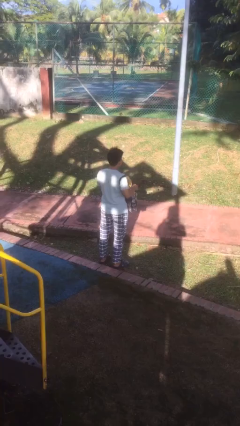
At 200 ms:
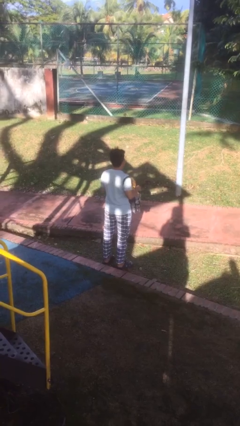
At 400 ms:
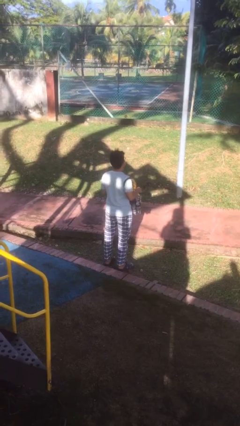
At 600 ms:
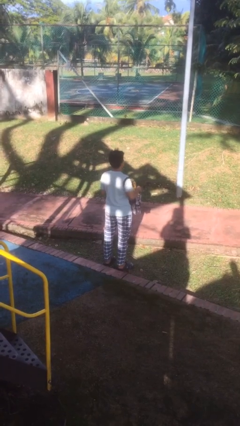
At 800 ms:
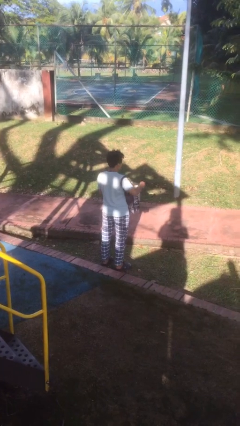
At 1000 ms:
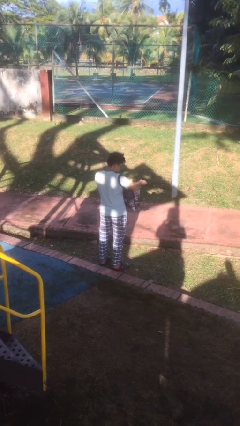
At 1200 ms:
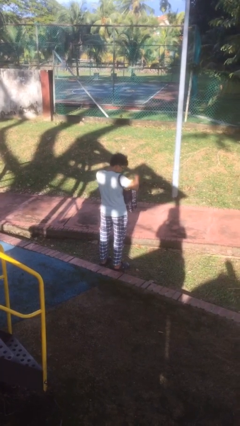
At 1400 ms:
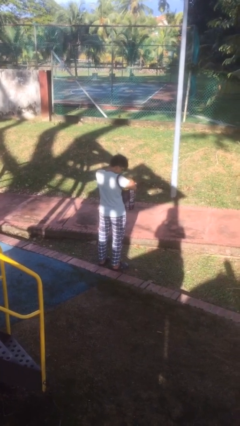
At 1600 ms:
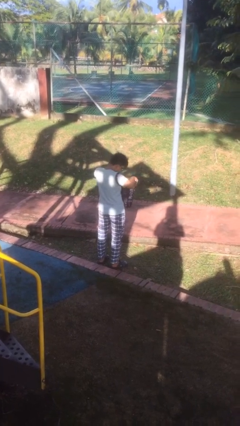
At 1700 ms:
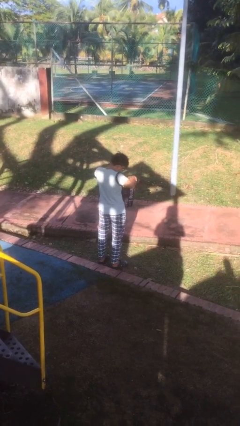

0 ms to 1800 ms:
person searches in bag

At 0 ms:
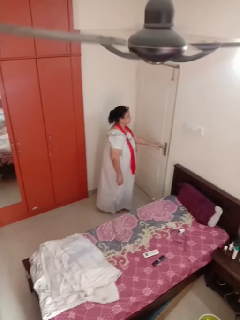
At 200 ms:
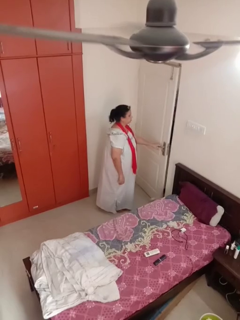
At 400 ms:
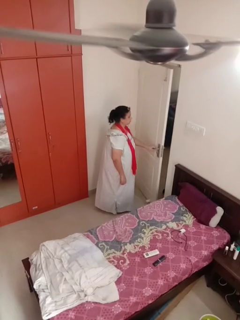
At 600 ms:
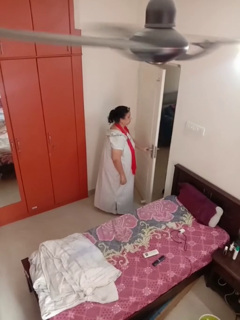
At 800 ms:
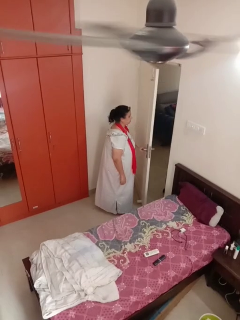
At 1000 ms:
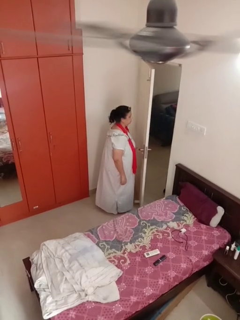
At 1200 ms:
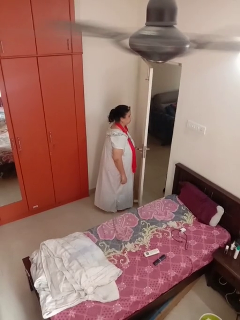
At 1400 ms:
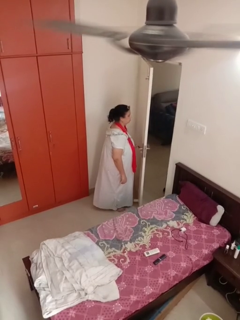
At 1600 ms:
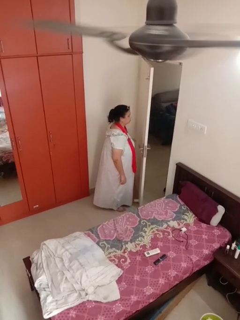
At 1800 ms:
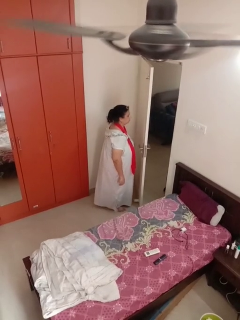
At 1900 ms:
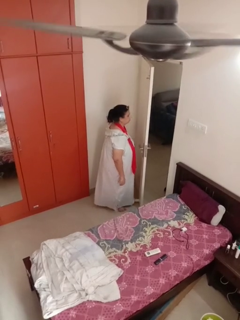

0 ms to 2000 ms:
person opens facility door

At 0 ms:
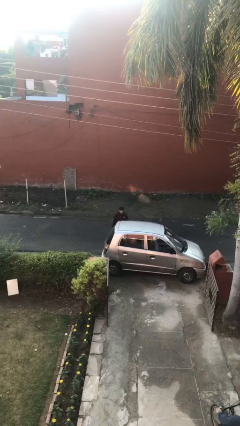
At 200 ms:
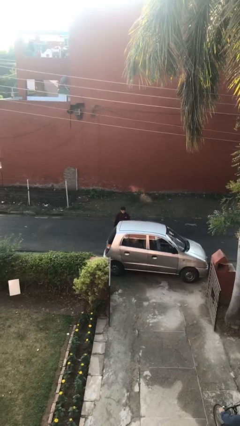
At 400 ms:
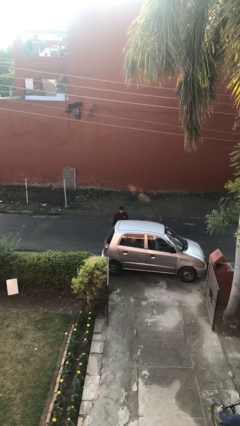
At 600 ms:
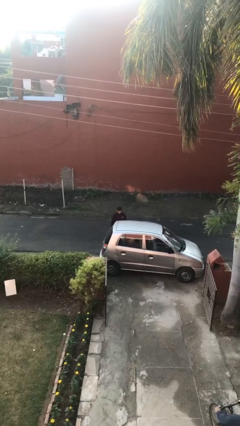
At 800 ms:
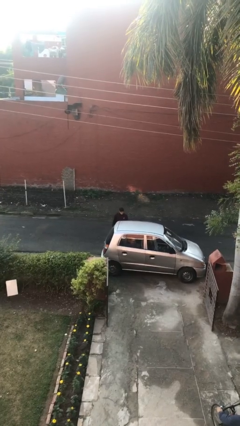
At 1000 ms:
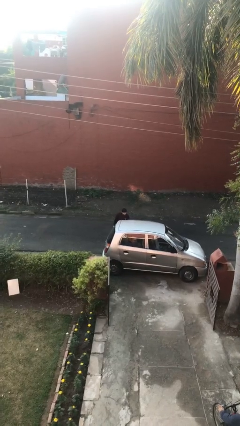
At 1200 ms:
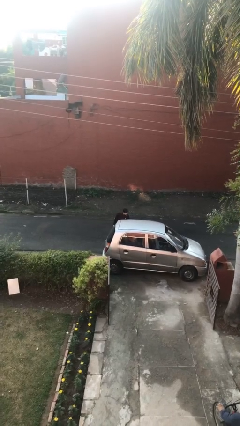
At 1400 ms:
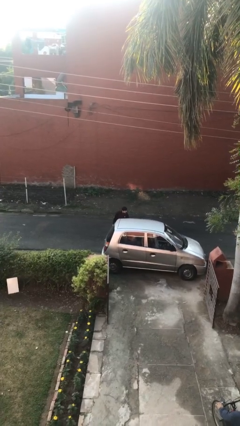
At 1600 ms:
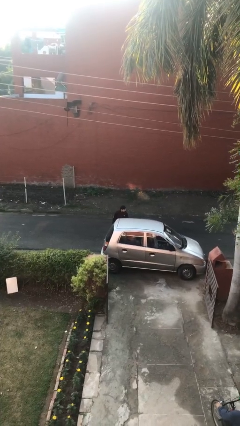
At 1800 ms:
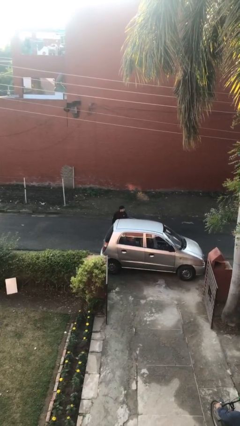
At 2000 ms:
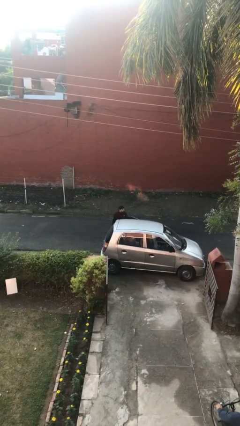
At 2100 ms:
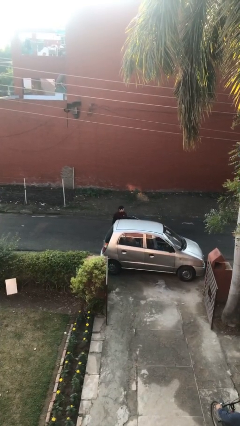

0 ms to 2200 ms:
person opens car door

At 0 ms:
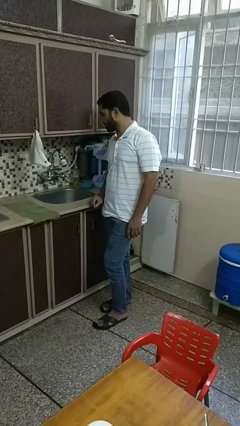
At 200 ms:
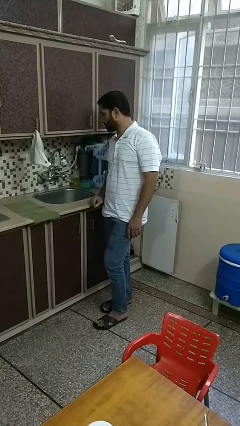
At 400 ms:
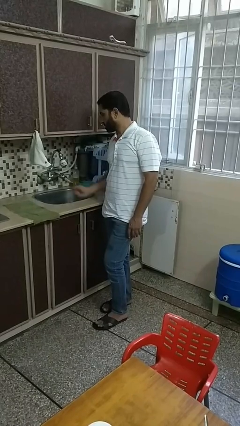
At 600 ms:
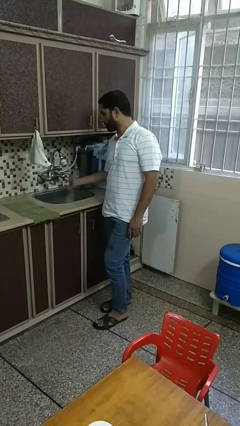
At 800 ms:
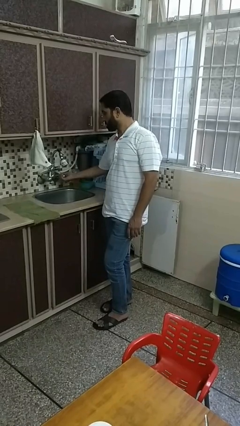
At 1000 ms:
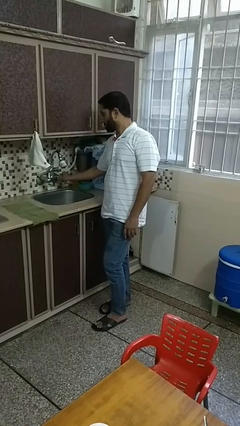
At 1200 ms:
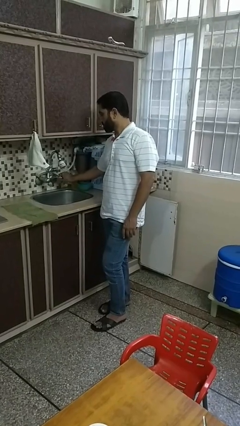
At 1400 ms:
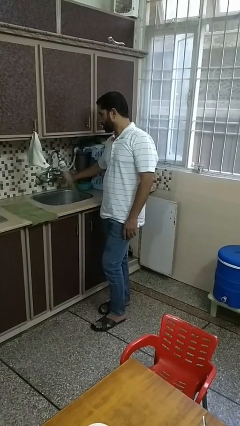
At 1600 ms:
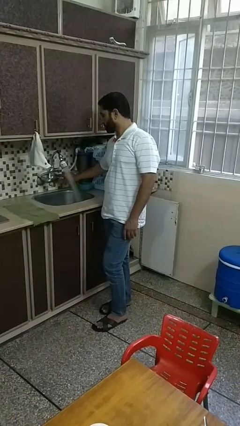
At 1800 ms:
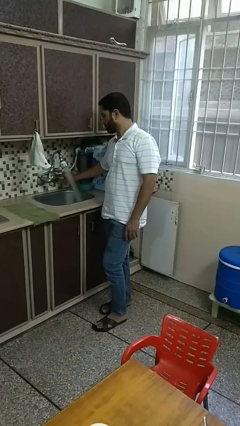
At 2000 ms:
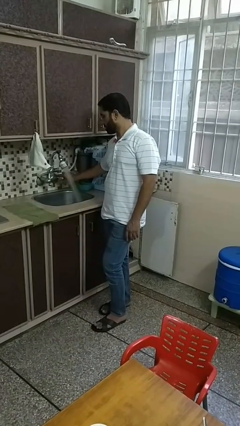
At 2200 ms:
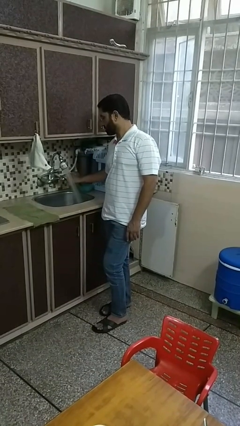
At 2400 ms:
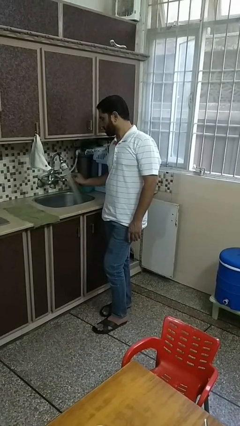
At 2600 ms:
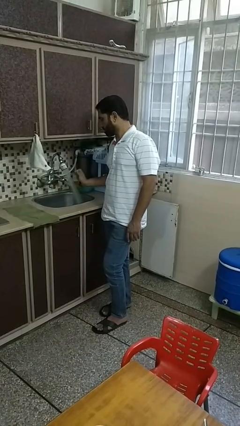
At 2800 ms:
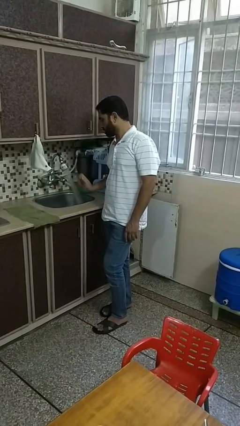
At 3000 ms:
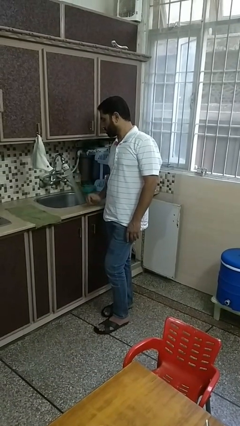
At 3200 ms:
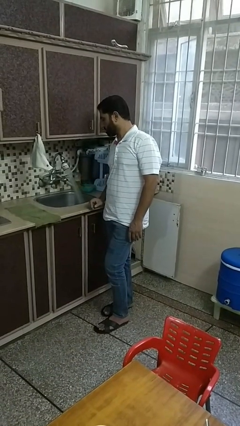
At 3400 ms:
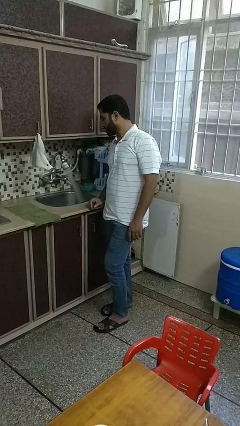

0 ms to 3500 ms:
person turns on faucet

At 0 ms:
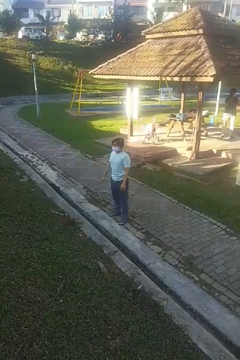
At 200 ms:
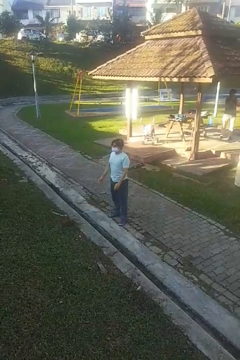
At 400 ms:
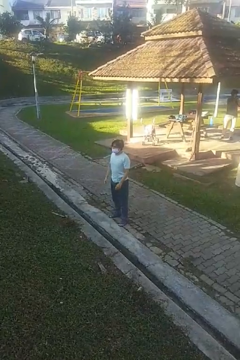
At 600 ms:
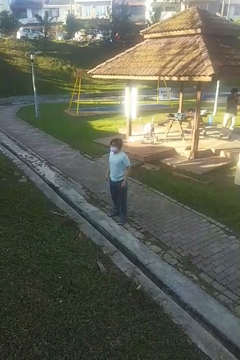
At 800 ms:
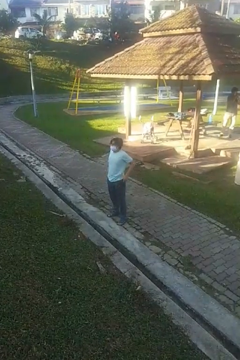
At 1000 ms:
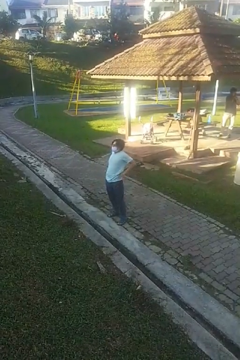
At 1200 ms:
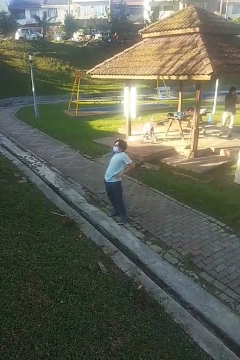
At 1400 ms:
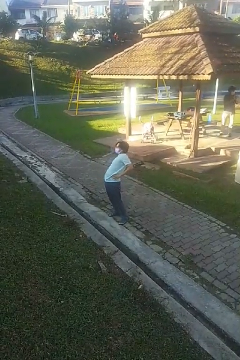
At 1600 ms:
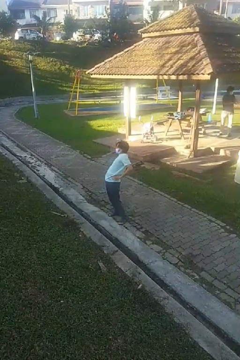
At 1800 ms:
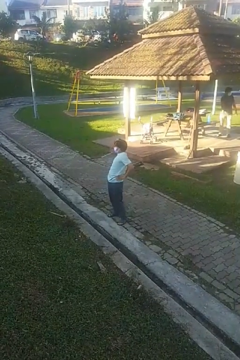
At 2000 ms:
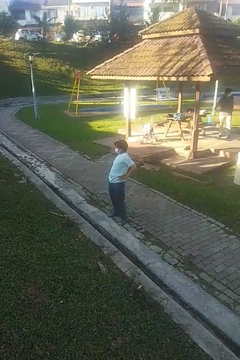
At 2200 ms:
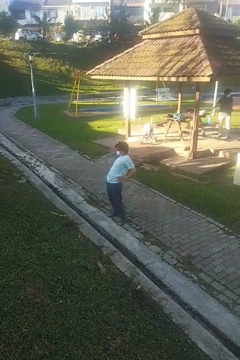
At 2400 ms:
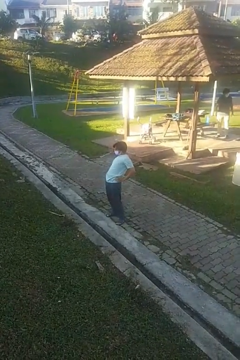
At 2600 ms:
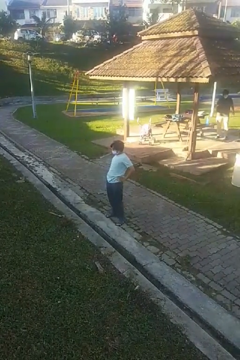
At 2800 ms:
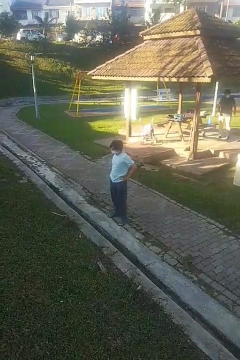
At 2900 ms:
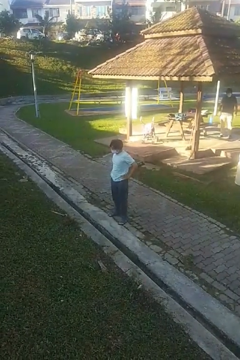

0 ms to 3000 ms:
person stretches back

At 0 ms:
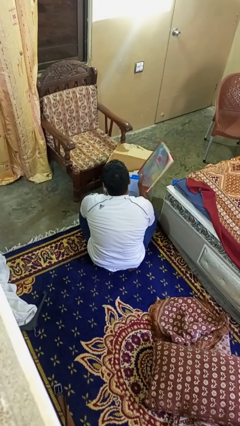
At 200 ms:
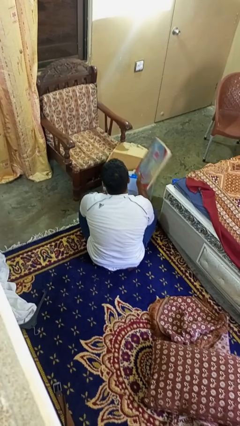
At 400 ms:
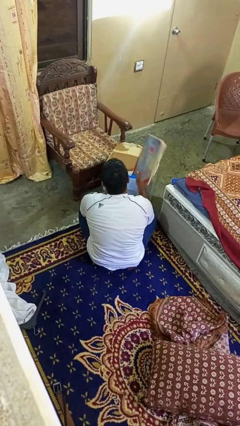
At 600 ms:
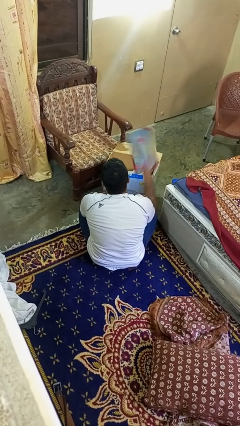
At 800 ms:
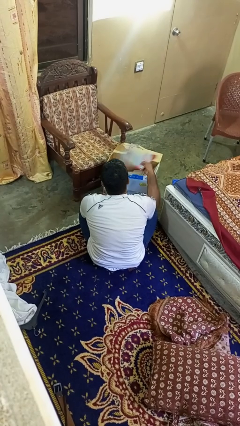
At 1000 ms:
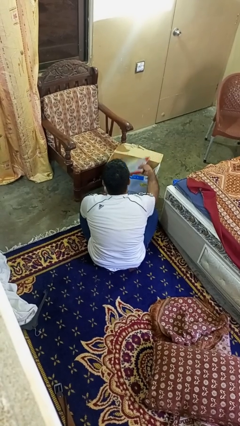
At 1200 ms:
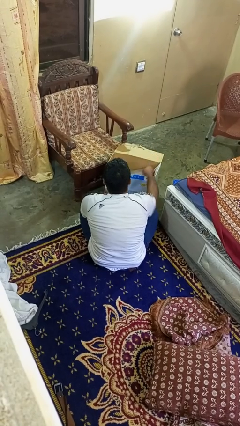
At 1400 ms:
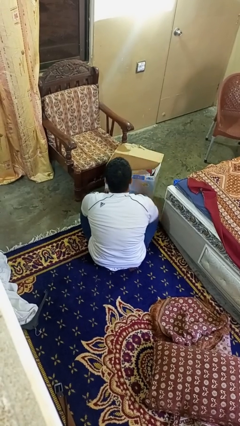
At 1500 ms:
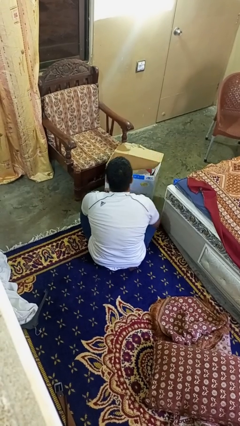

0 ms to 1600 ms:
person puts object into box

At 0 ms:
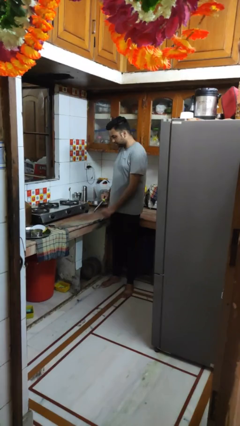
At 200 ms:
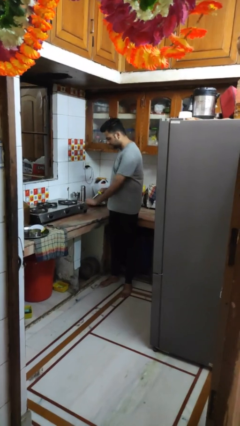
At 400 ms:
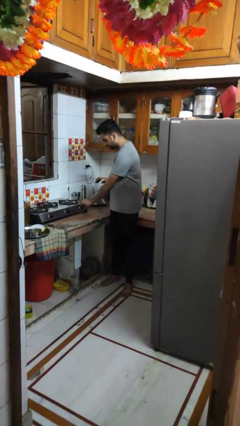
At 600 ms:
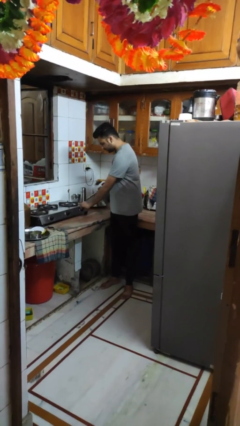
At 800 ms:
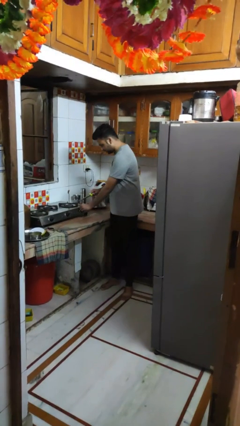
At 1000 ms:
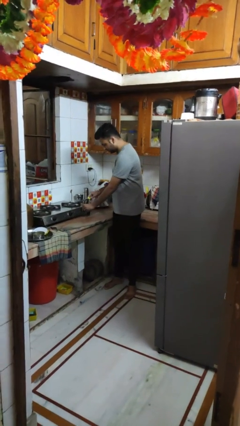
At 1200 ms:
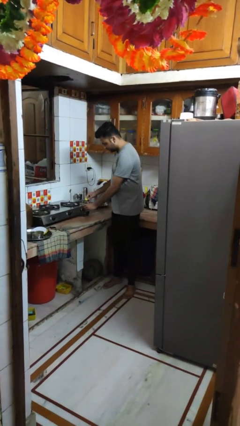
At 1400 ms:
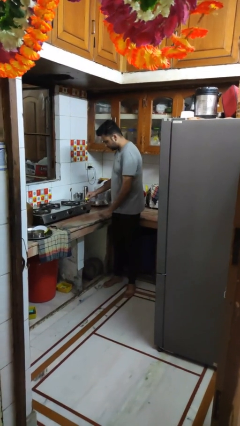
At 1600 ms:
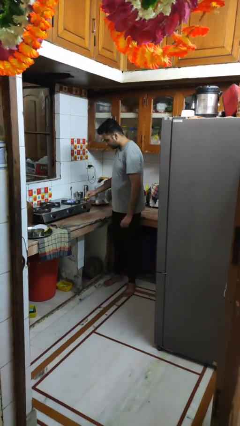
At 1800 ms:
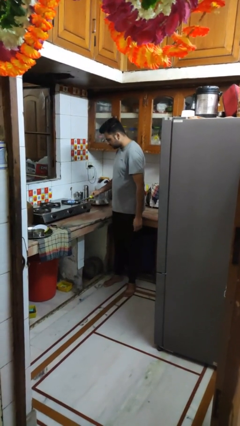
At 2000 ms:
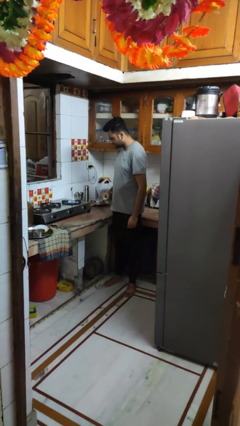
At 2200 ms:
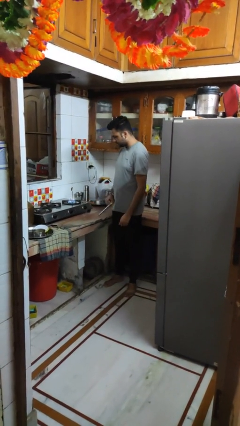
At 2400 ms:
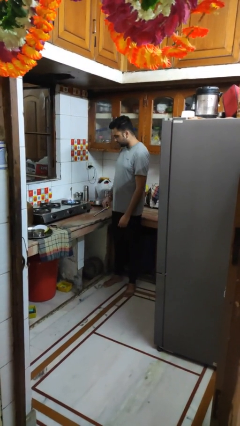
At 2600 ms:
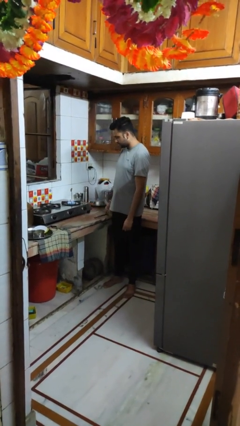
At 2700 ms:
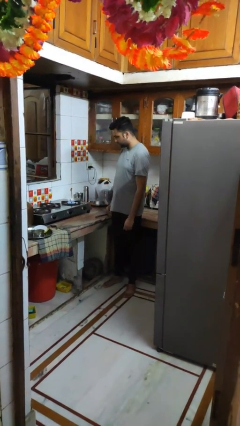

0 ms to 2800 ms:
person turns on stovetop

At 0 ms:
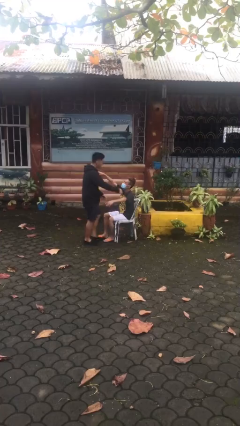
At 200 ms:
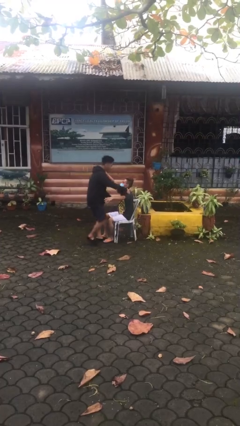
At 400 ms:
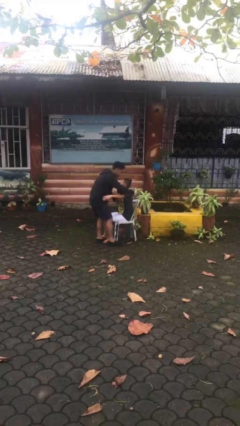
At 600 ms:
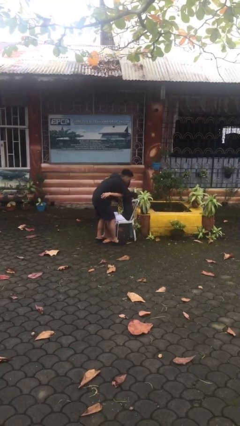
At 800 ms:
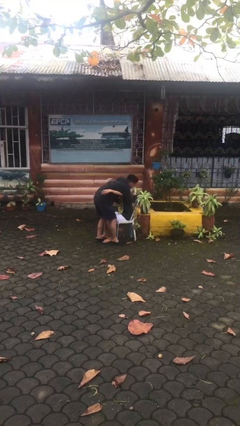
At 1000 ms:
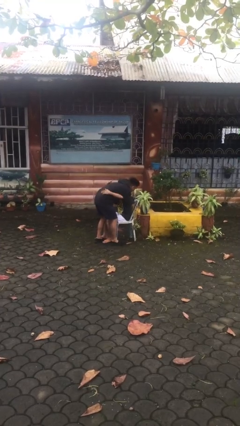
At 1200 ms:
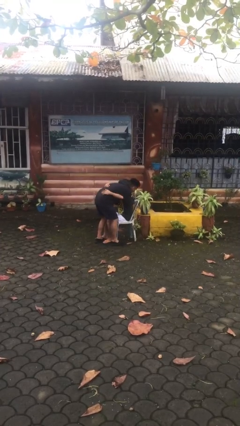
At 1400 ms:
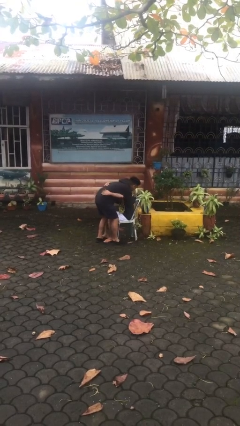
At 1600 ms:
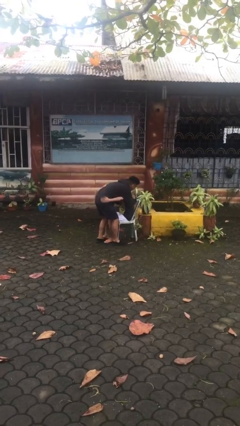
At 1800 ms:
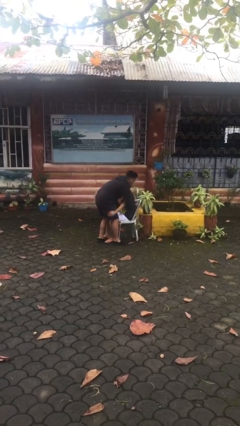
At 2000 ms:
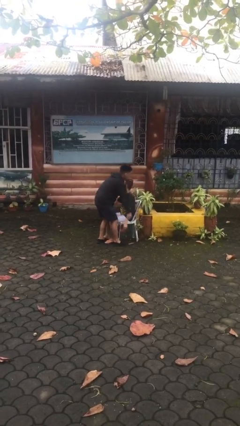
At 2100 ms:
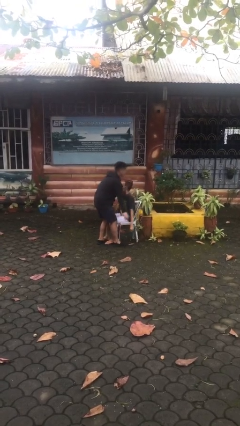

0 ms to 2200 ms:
person embraces person
